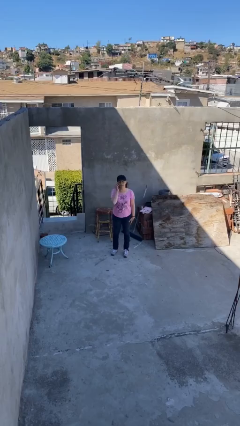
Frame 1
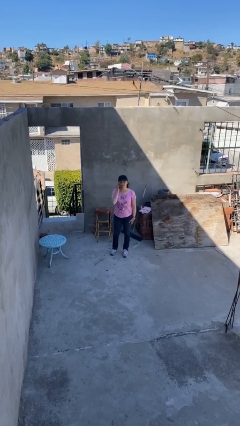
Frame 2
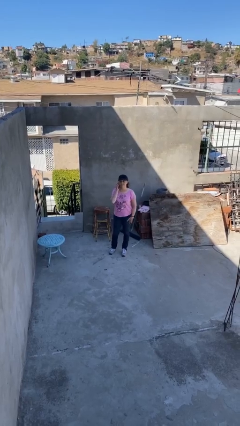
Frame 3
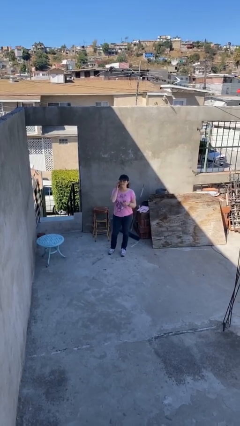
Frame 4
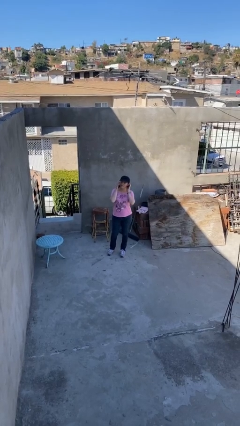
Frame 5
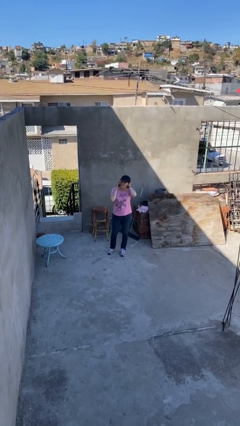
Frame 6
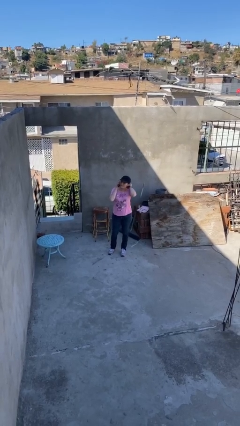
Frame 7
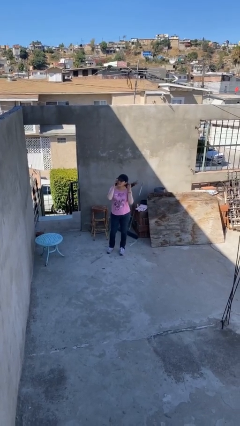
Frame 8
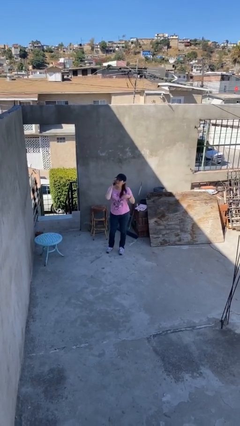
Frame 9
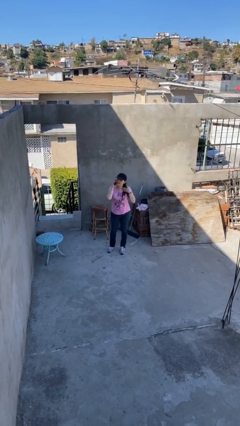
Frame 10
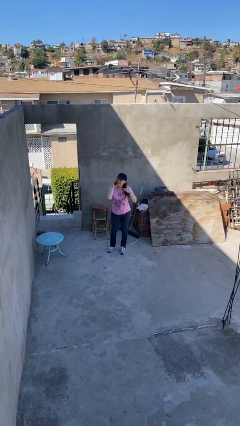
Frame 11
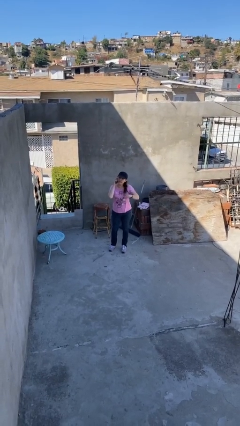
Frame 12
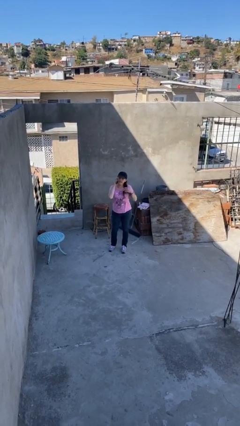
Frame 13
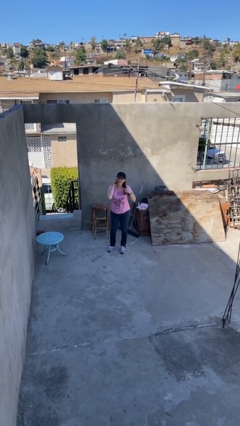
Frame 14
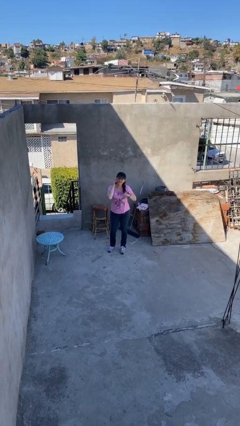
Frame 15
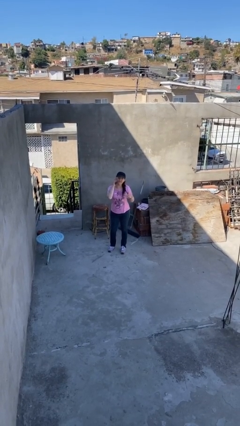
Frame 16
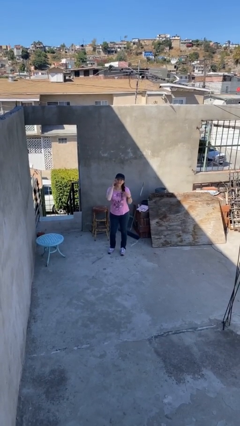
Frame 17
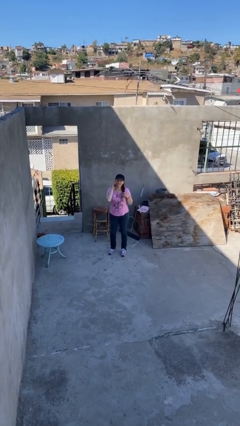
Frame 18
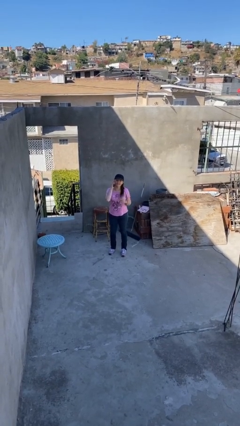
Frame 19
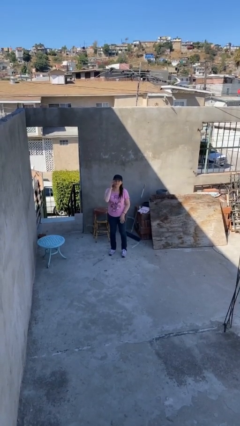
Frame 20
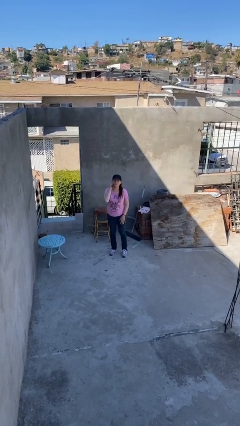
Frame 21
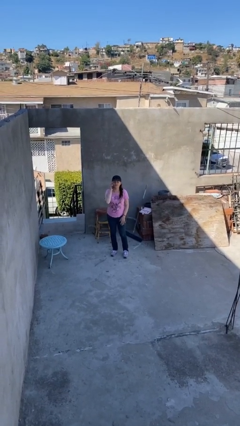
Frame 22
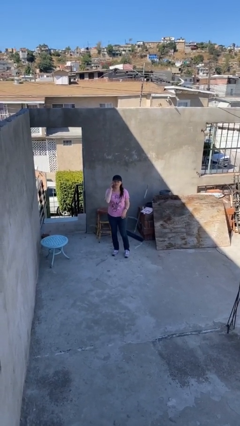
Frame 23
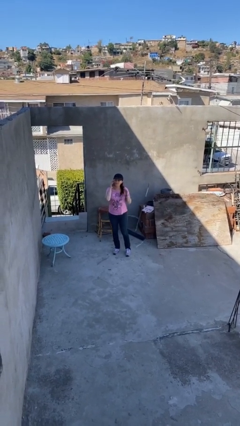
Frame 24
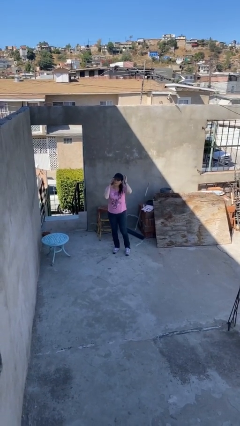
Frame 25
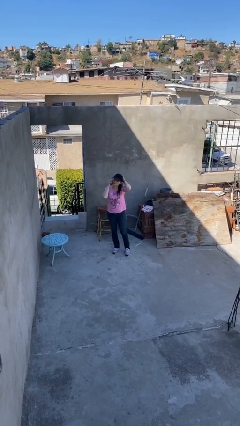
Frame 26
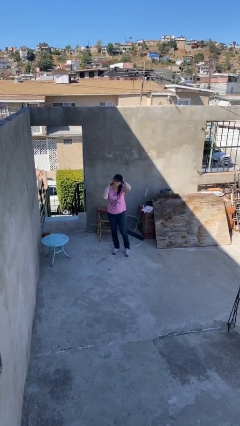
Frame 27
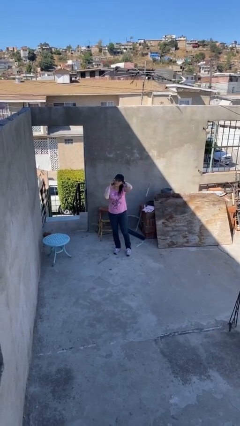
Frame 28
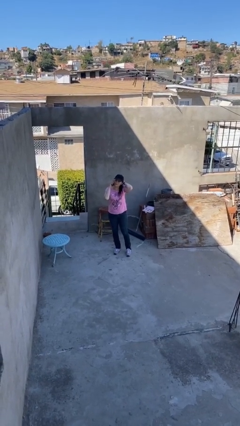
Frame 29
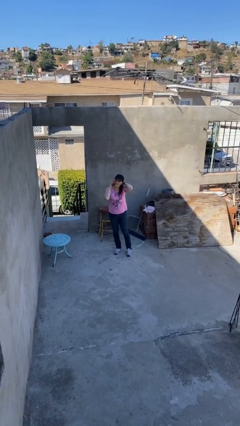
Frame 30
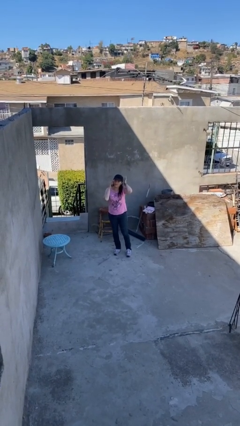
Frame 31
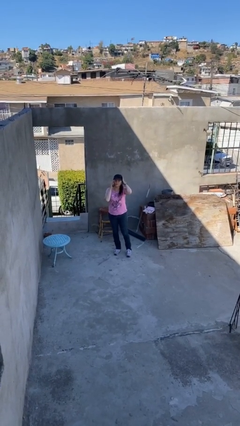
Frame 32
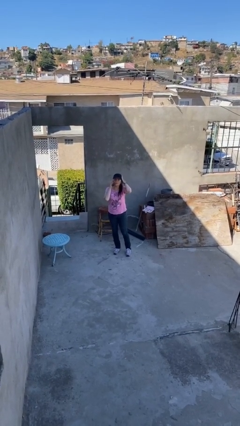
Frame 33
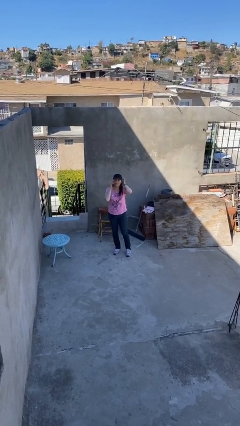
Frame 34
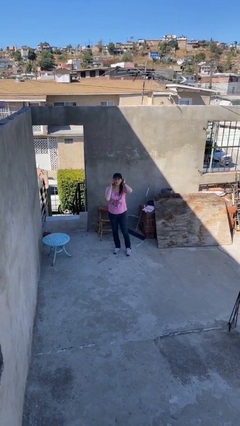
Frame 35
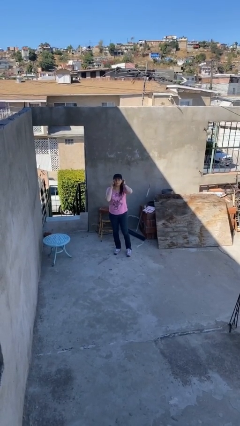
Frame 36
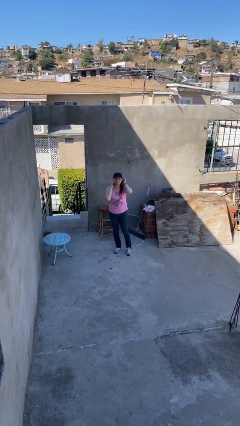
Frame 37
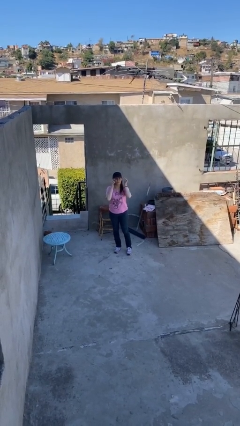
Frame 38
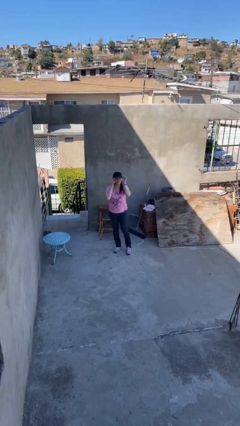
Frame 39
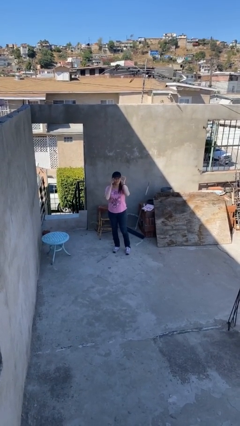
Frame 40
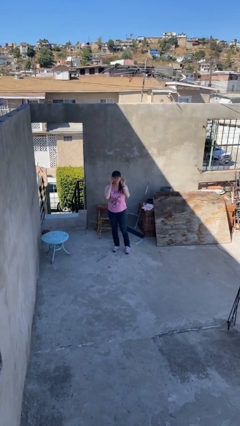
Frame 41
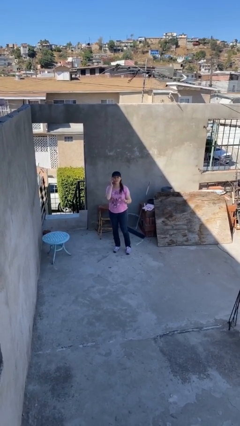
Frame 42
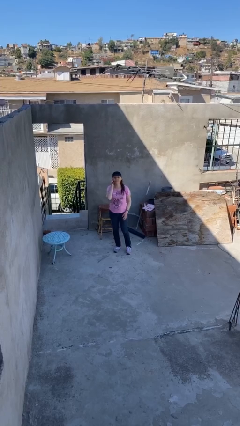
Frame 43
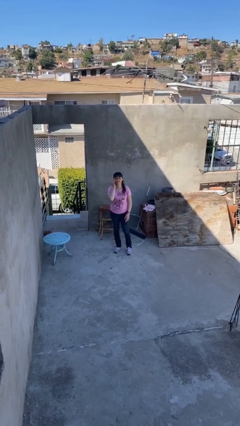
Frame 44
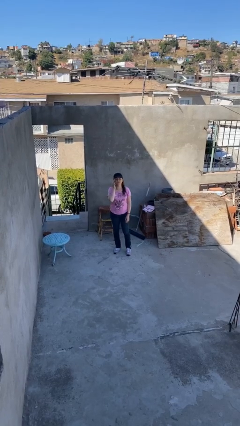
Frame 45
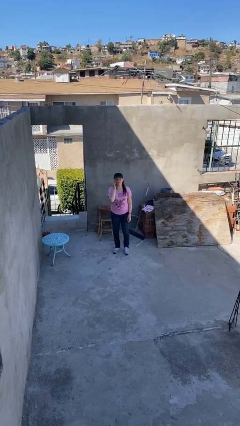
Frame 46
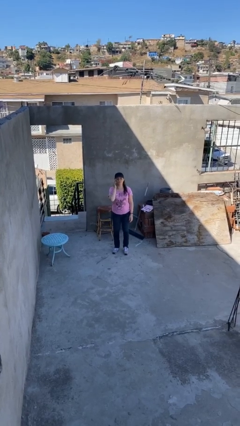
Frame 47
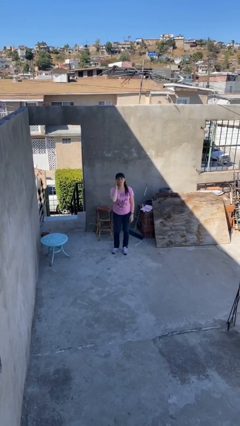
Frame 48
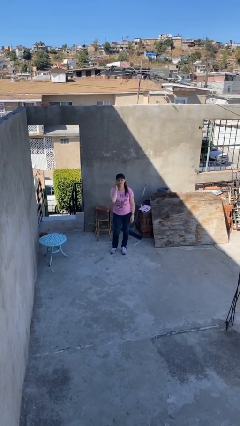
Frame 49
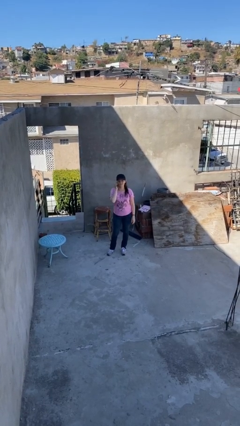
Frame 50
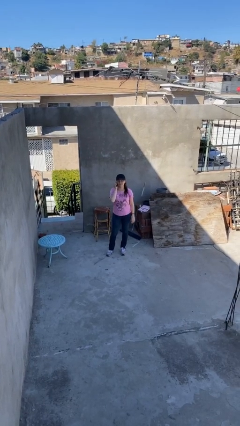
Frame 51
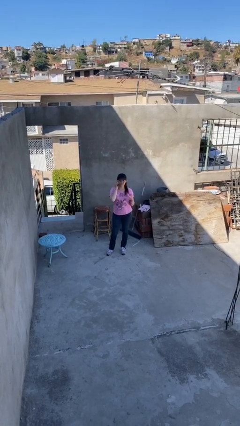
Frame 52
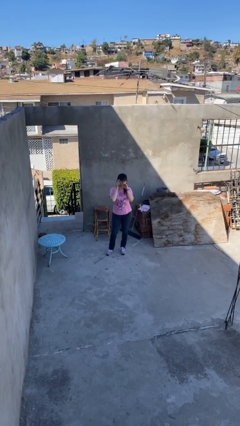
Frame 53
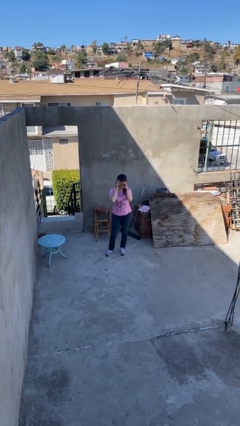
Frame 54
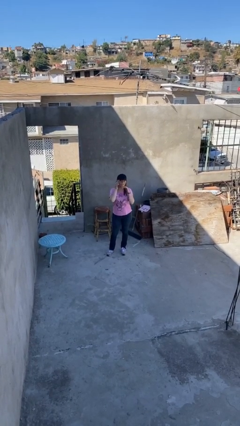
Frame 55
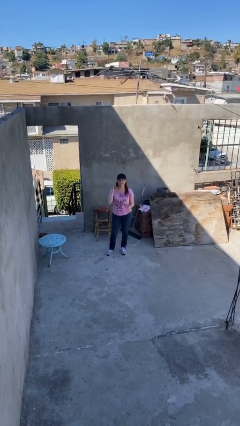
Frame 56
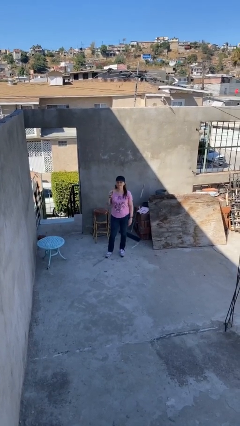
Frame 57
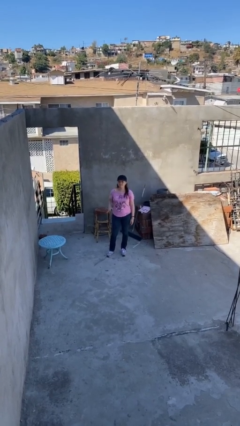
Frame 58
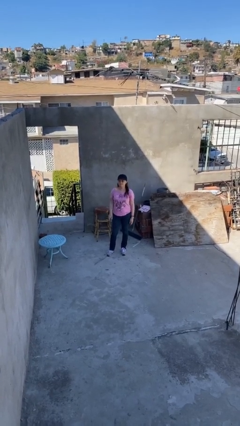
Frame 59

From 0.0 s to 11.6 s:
person talks on phone

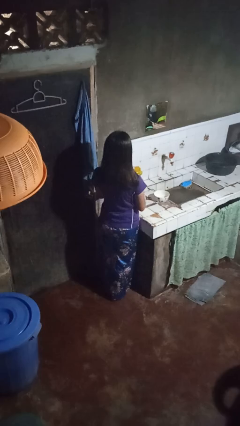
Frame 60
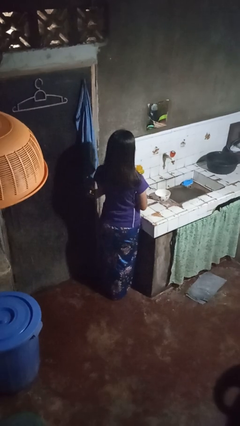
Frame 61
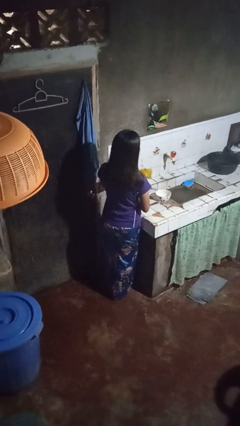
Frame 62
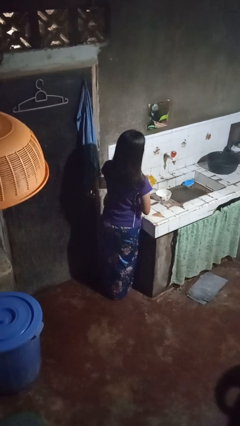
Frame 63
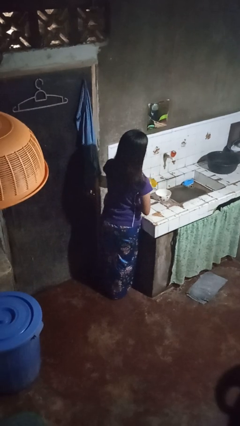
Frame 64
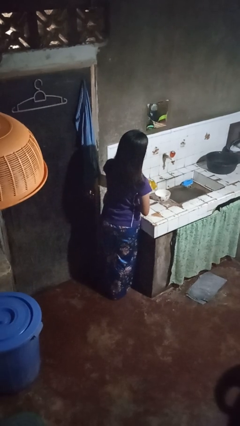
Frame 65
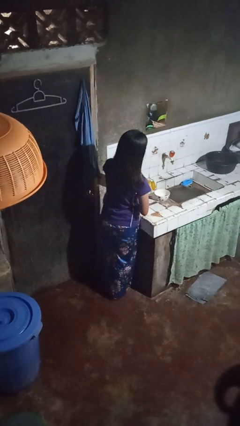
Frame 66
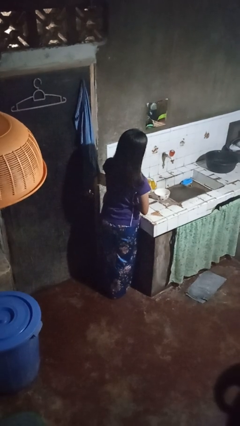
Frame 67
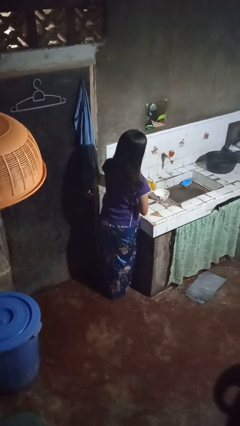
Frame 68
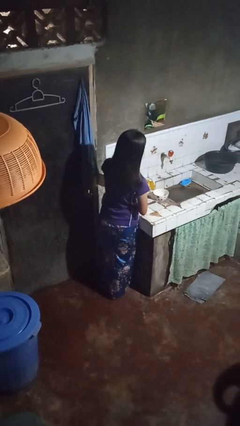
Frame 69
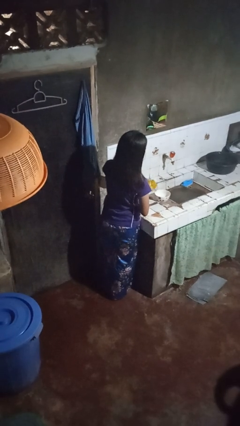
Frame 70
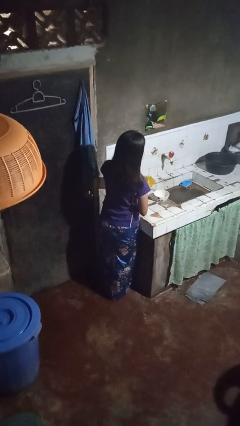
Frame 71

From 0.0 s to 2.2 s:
person pours into bowl

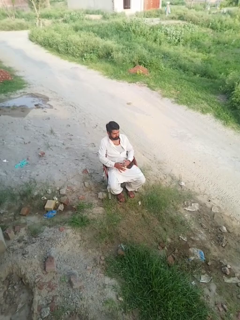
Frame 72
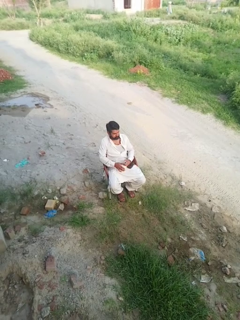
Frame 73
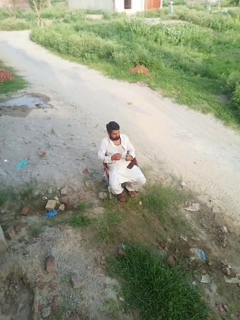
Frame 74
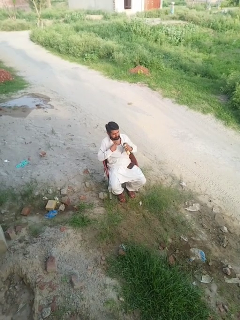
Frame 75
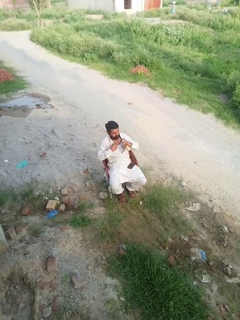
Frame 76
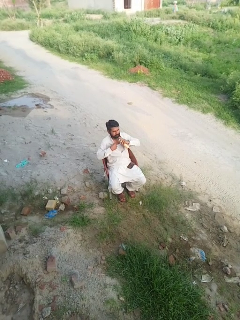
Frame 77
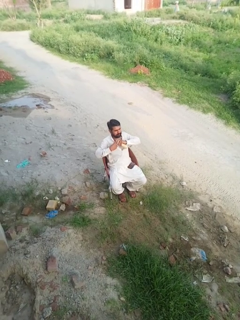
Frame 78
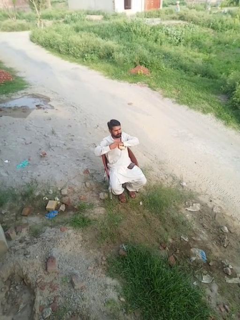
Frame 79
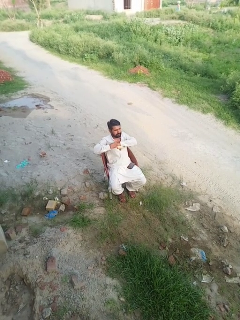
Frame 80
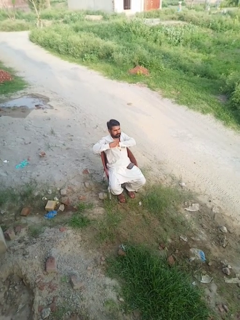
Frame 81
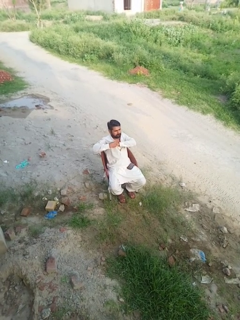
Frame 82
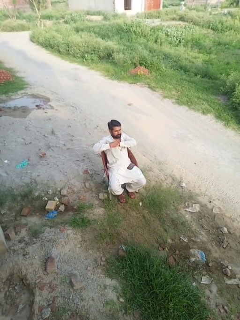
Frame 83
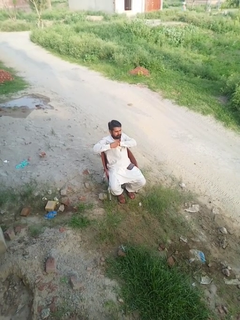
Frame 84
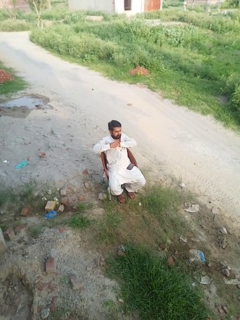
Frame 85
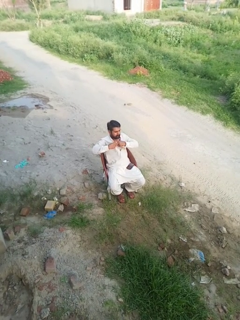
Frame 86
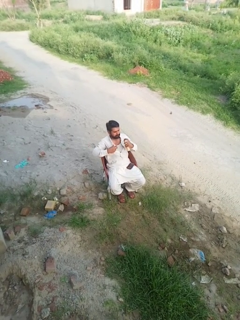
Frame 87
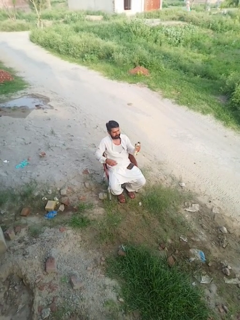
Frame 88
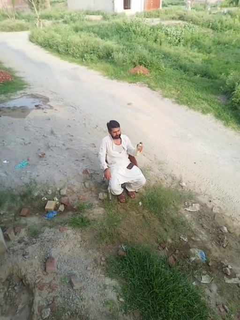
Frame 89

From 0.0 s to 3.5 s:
person applies deodorant

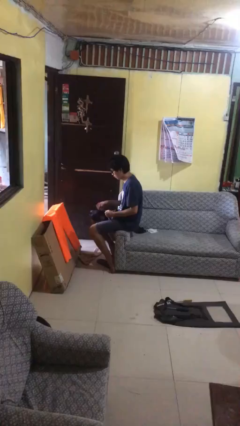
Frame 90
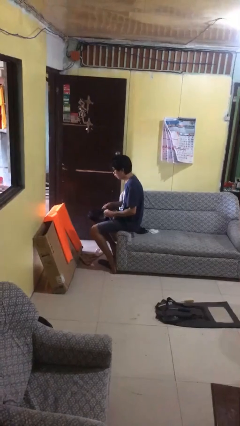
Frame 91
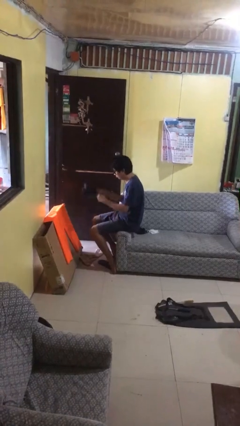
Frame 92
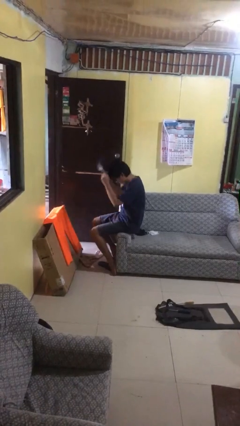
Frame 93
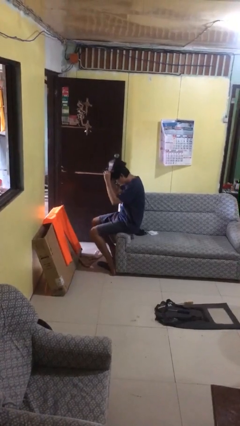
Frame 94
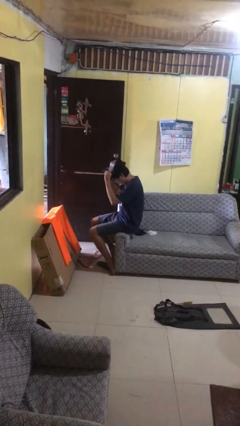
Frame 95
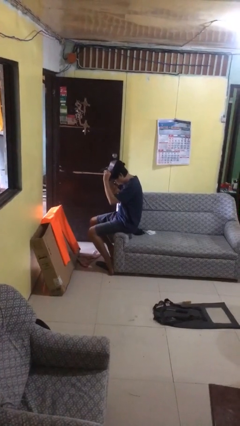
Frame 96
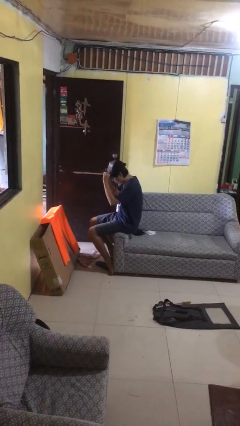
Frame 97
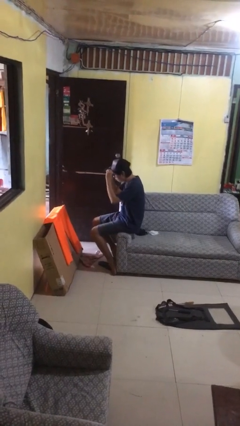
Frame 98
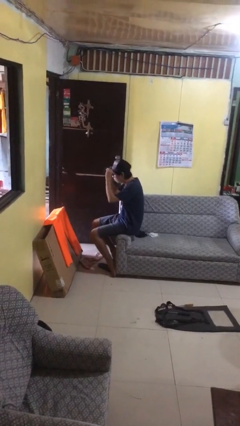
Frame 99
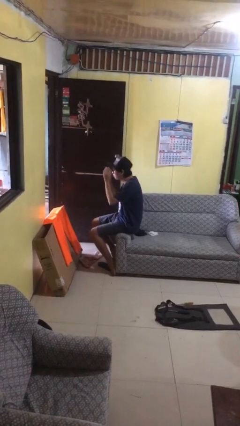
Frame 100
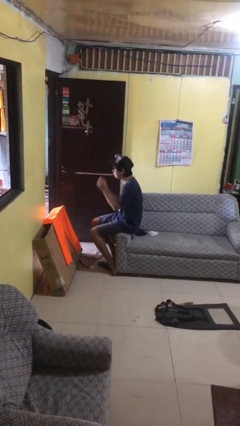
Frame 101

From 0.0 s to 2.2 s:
person puts on hat
